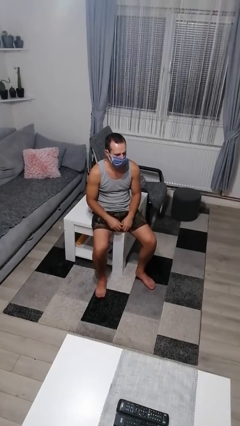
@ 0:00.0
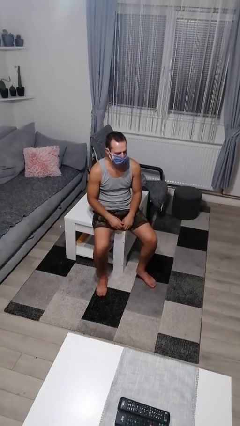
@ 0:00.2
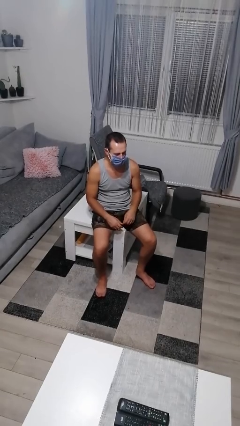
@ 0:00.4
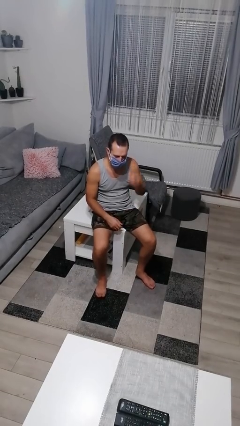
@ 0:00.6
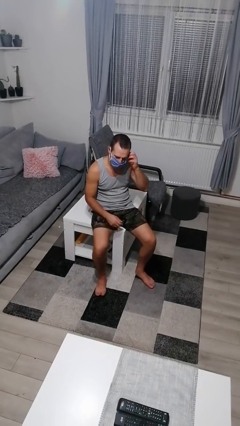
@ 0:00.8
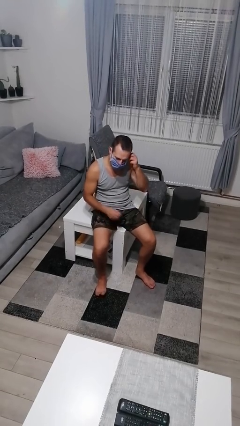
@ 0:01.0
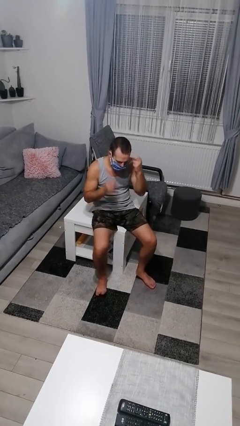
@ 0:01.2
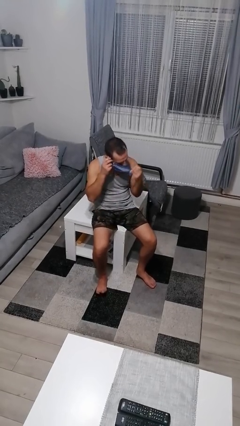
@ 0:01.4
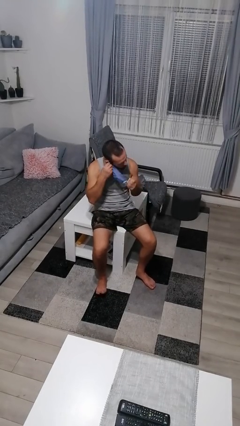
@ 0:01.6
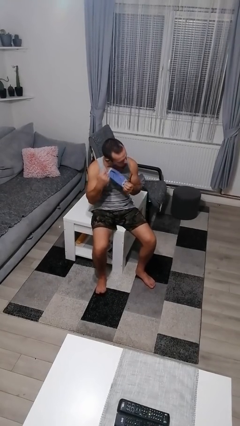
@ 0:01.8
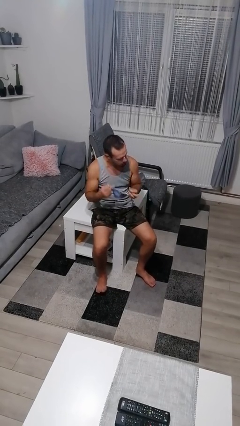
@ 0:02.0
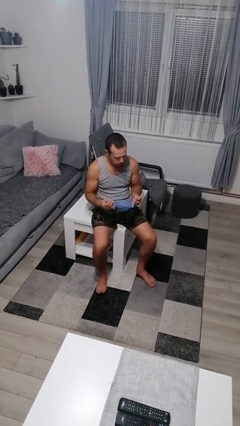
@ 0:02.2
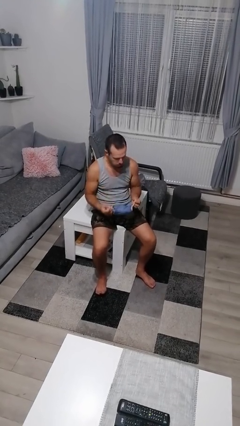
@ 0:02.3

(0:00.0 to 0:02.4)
person takes off facemask

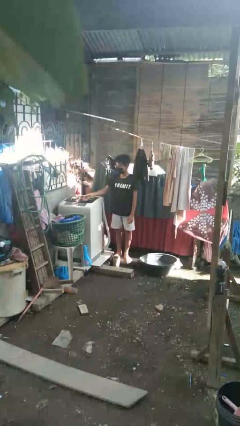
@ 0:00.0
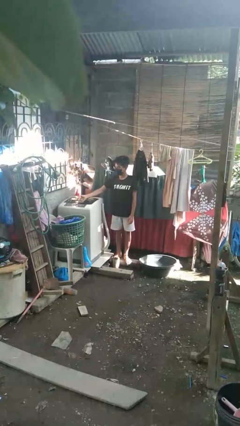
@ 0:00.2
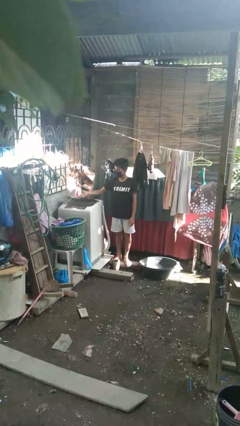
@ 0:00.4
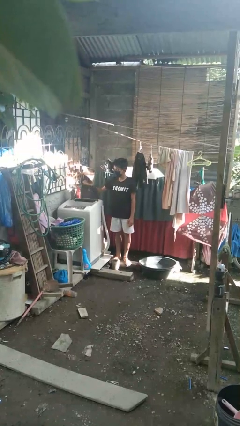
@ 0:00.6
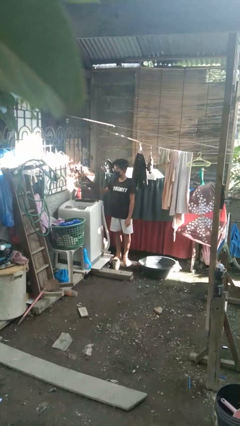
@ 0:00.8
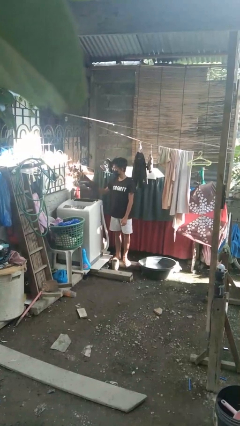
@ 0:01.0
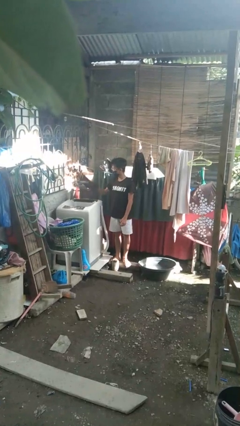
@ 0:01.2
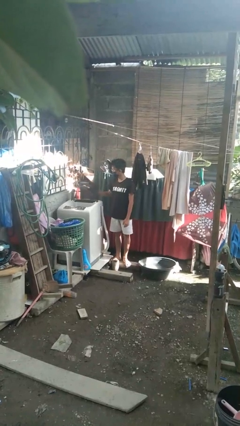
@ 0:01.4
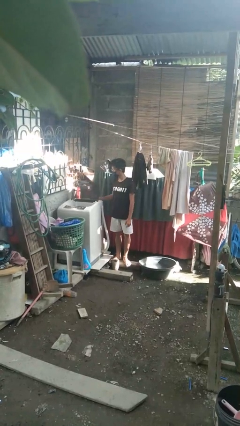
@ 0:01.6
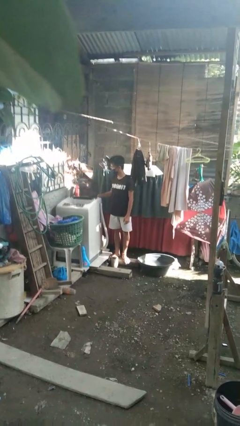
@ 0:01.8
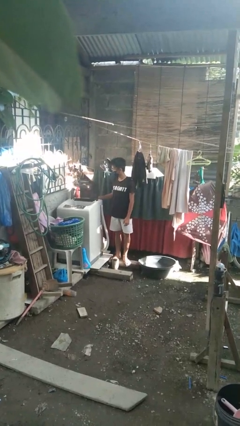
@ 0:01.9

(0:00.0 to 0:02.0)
person opens clothes washer

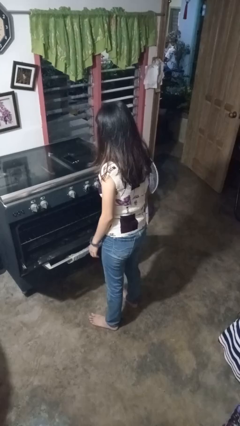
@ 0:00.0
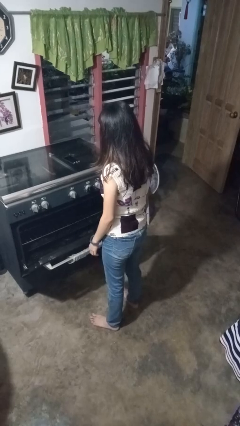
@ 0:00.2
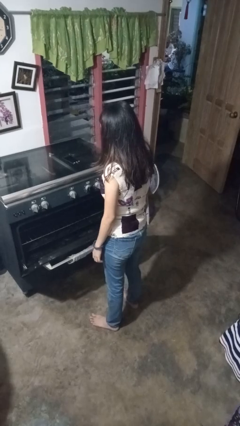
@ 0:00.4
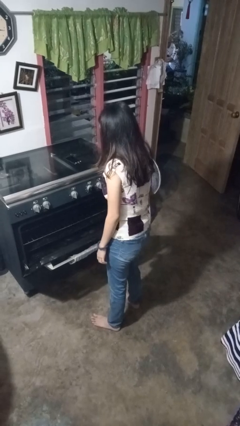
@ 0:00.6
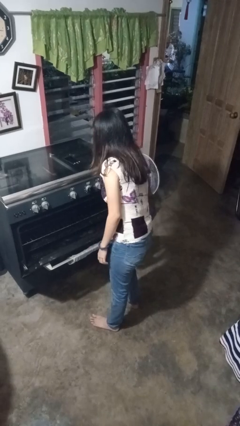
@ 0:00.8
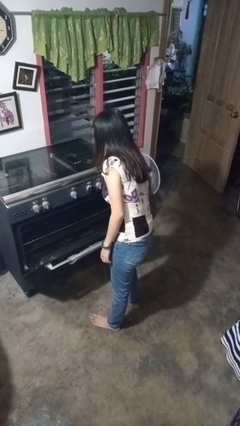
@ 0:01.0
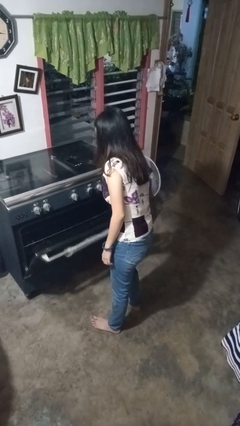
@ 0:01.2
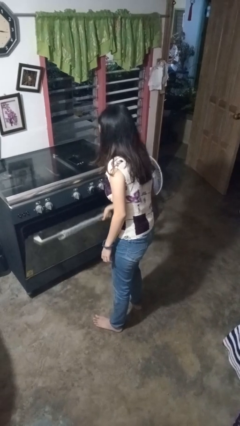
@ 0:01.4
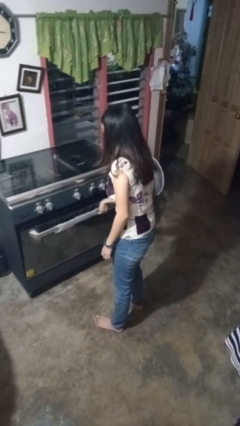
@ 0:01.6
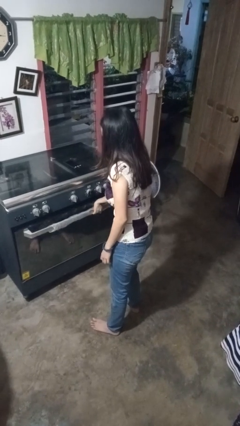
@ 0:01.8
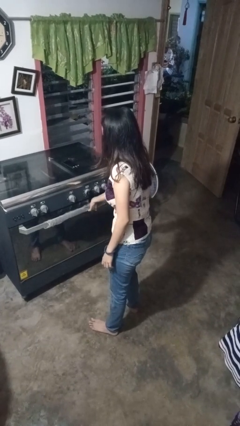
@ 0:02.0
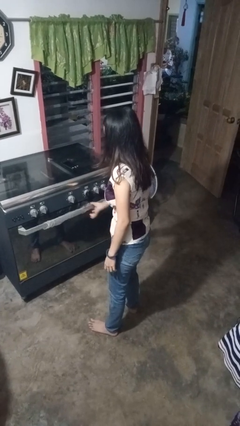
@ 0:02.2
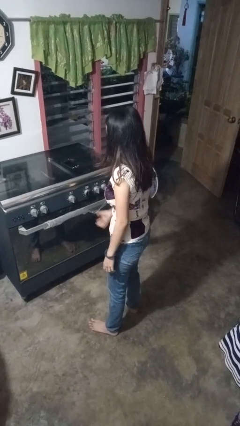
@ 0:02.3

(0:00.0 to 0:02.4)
person closes oven door

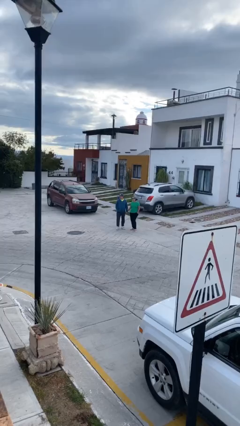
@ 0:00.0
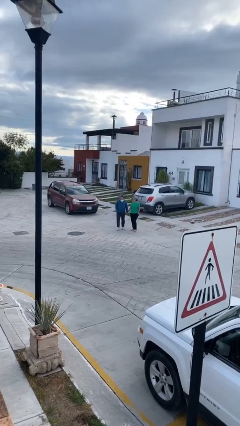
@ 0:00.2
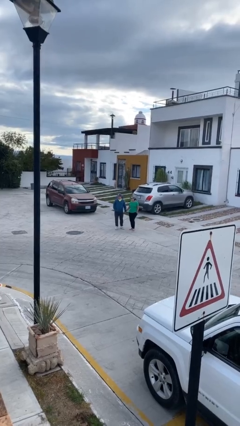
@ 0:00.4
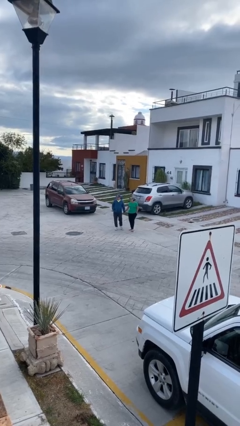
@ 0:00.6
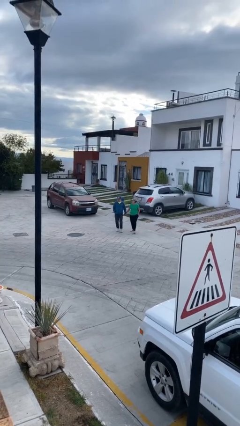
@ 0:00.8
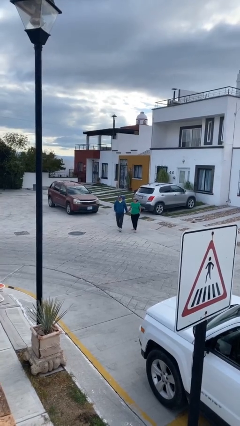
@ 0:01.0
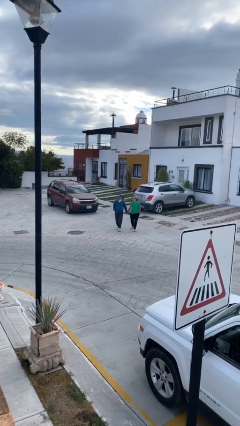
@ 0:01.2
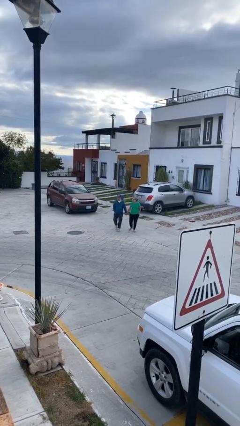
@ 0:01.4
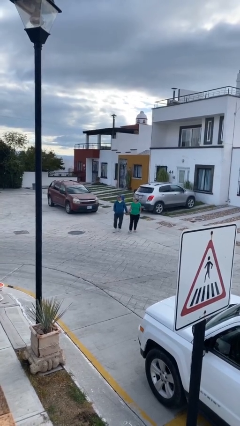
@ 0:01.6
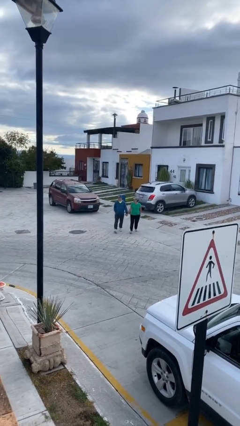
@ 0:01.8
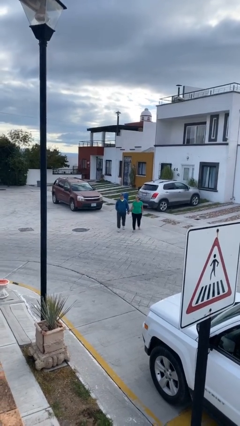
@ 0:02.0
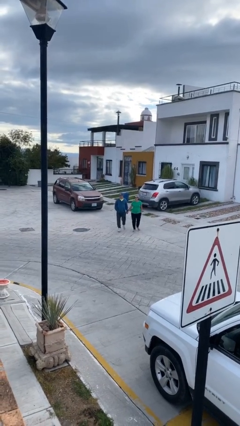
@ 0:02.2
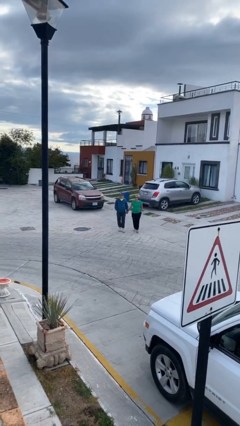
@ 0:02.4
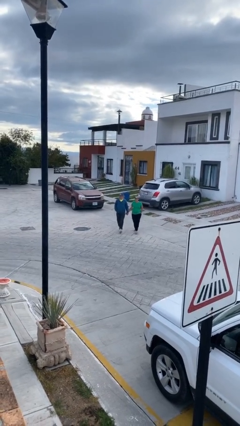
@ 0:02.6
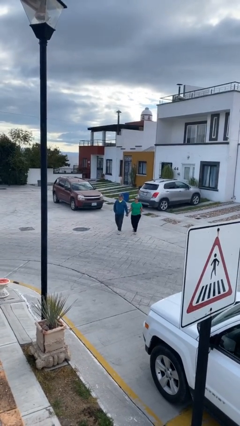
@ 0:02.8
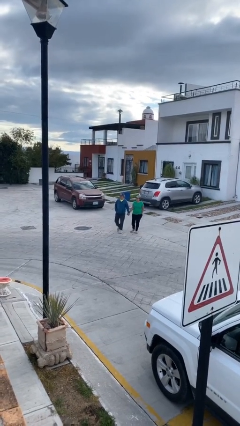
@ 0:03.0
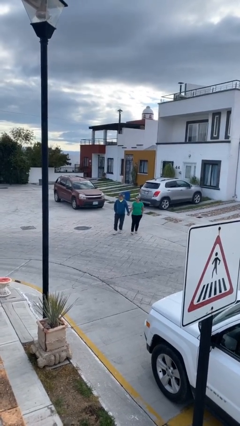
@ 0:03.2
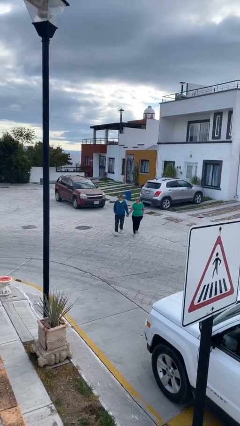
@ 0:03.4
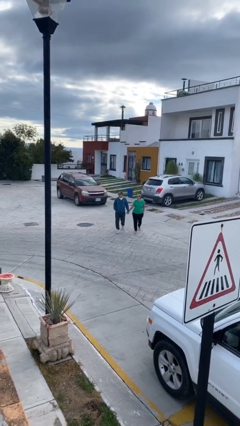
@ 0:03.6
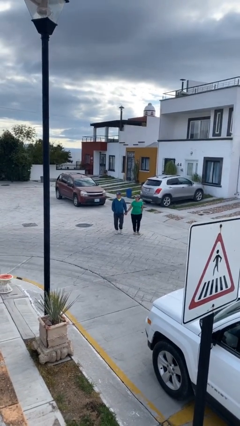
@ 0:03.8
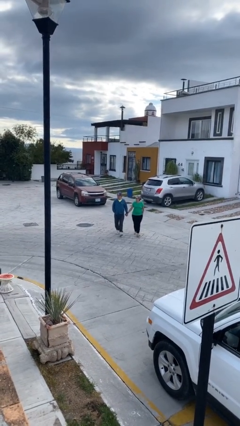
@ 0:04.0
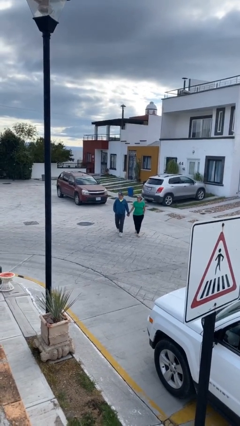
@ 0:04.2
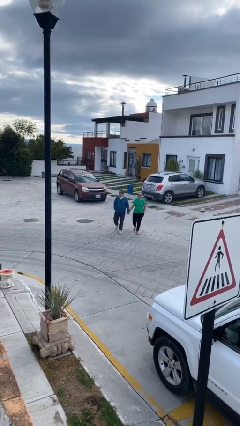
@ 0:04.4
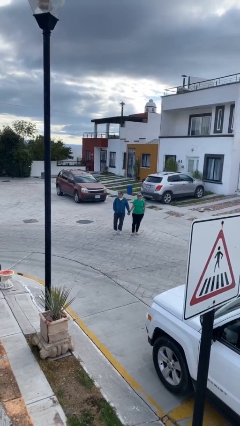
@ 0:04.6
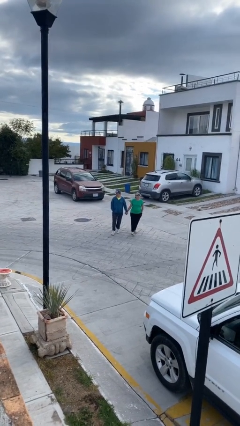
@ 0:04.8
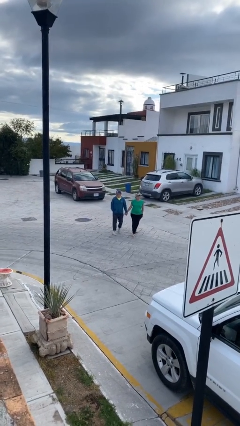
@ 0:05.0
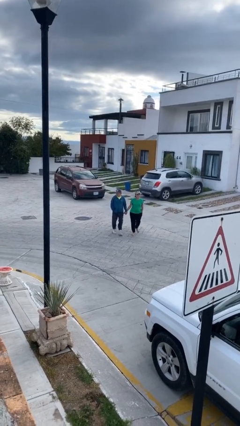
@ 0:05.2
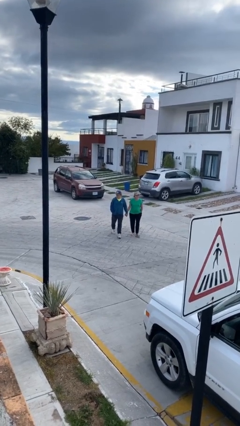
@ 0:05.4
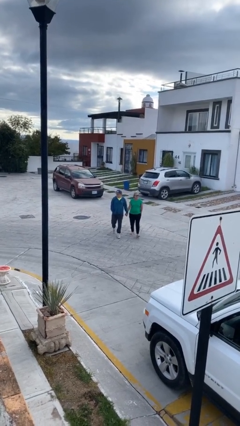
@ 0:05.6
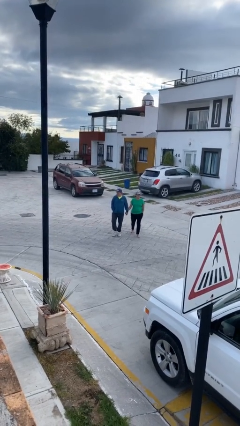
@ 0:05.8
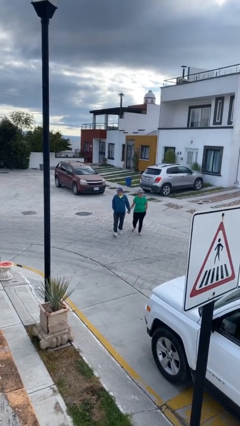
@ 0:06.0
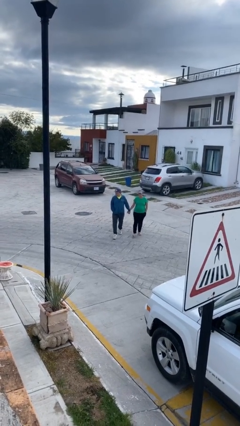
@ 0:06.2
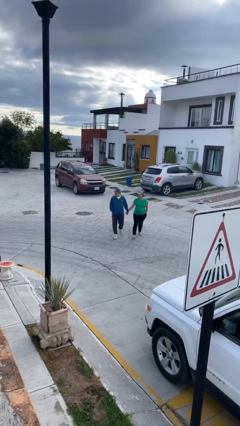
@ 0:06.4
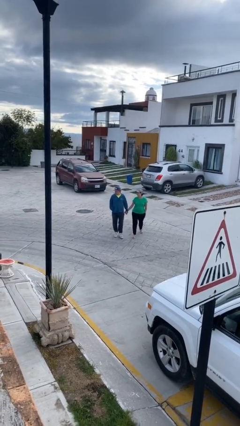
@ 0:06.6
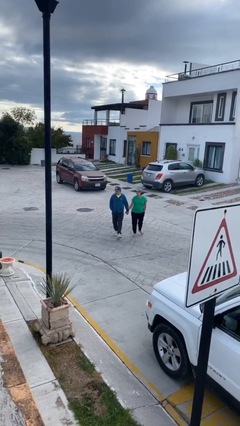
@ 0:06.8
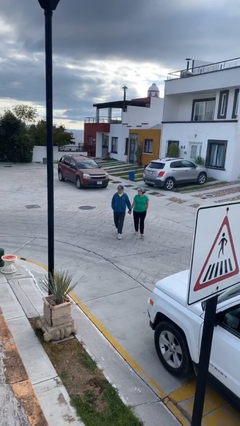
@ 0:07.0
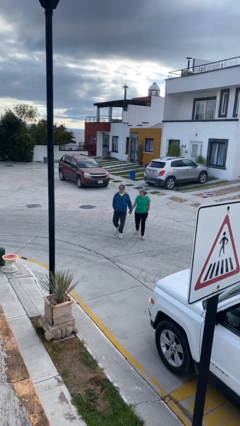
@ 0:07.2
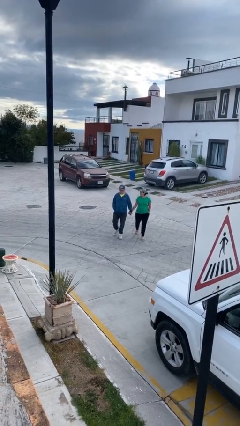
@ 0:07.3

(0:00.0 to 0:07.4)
person holds hand

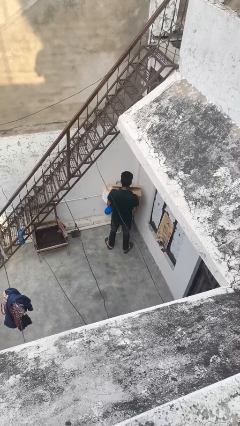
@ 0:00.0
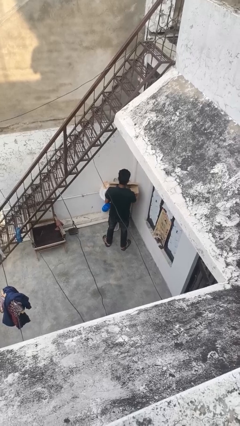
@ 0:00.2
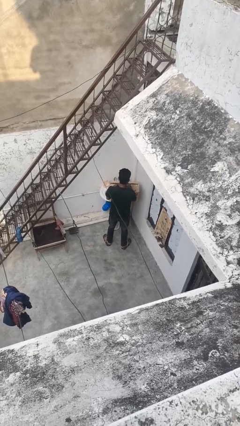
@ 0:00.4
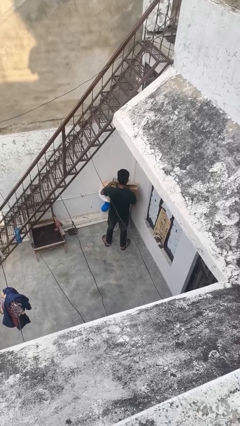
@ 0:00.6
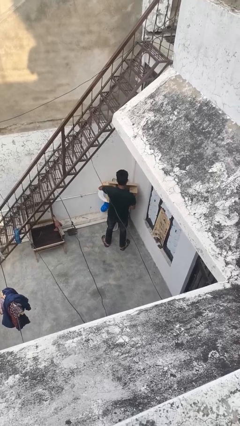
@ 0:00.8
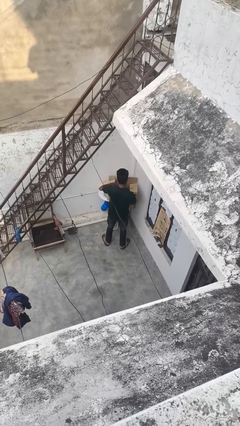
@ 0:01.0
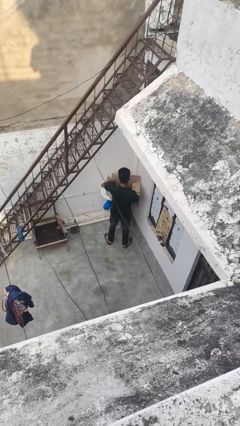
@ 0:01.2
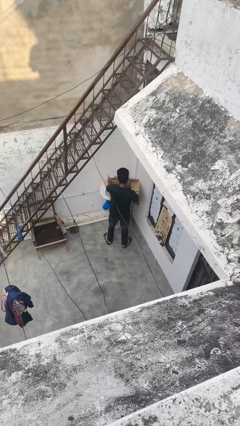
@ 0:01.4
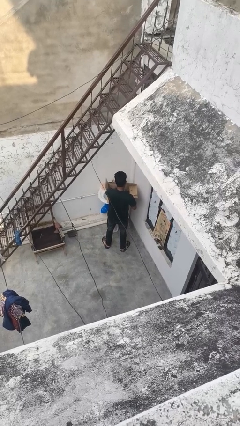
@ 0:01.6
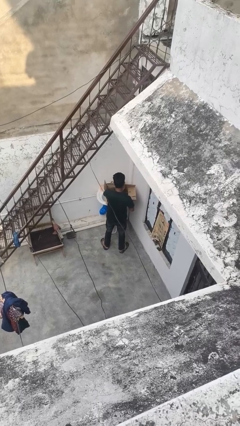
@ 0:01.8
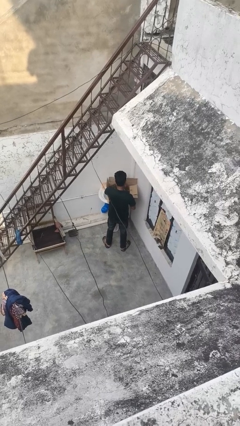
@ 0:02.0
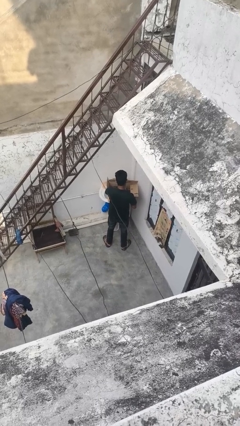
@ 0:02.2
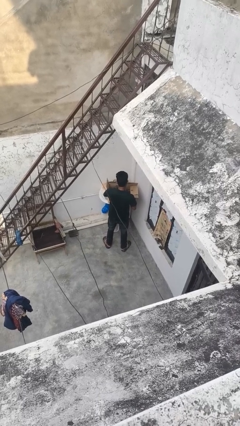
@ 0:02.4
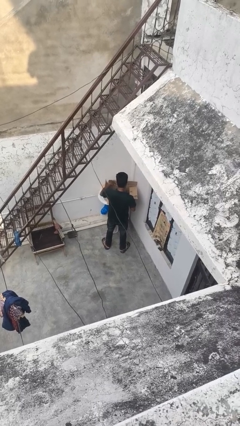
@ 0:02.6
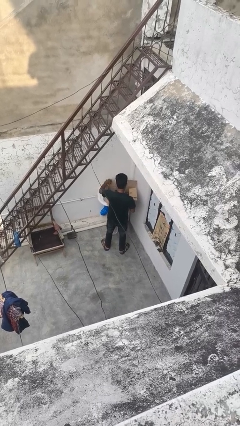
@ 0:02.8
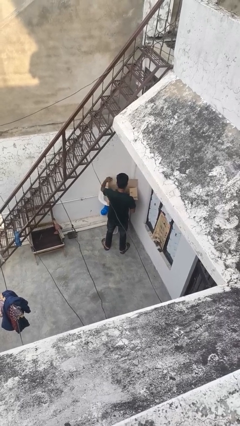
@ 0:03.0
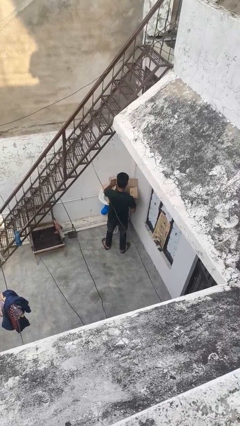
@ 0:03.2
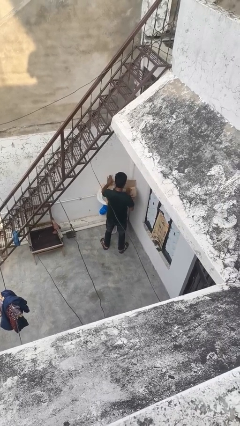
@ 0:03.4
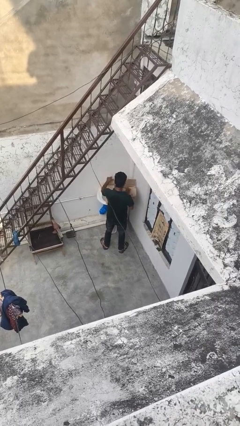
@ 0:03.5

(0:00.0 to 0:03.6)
person searches in box
